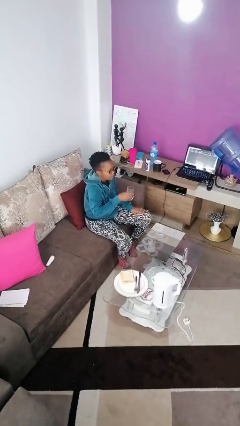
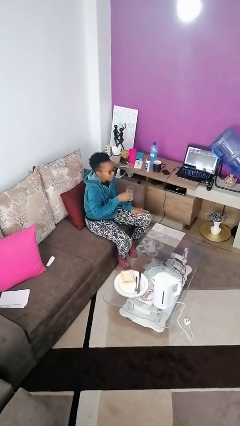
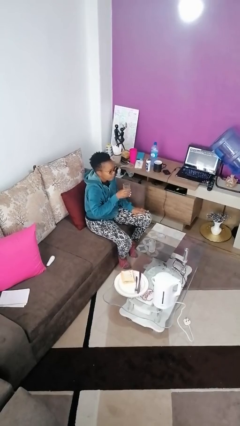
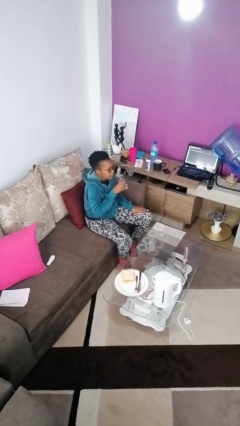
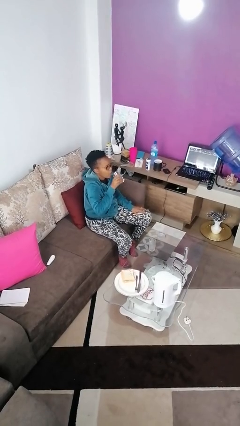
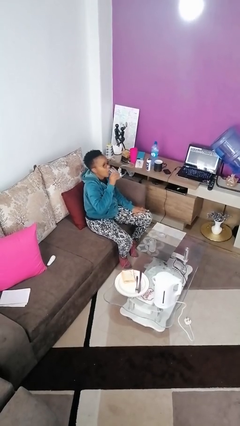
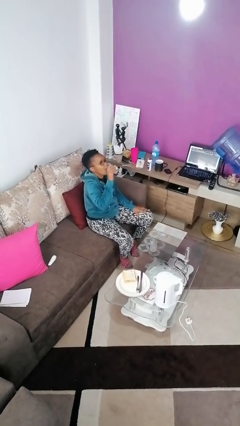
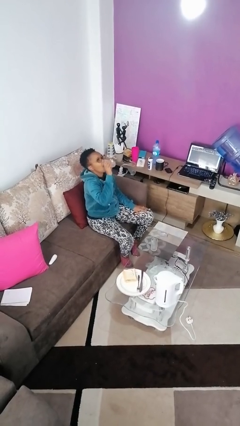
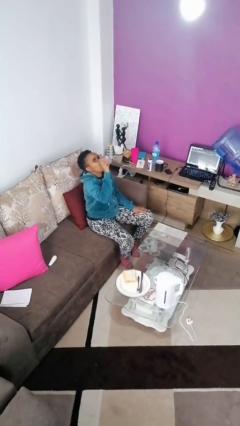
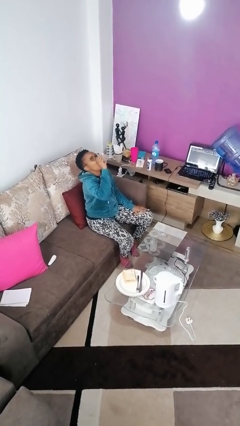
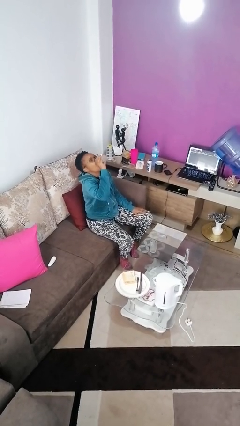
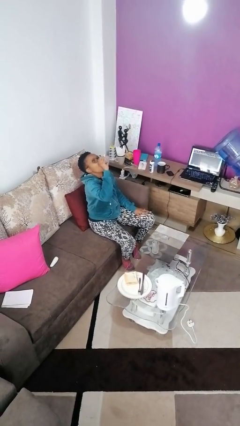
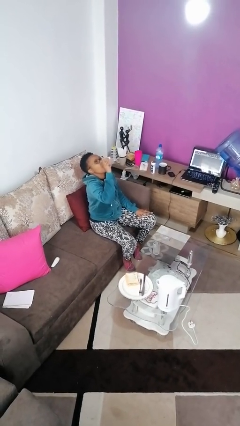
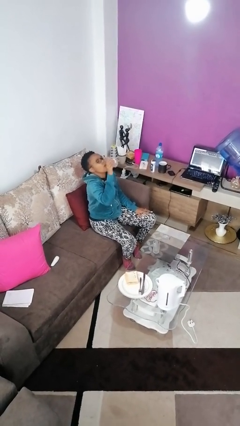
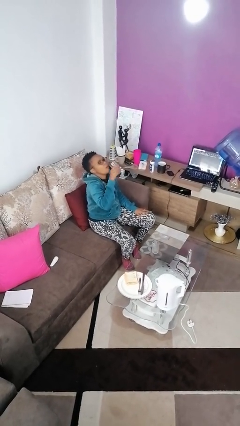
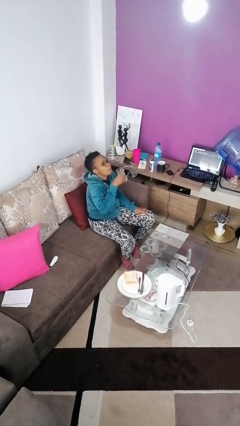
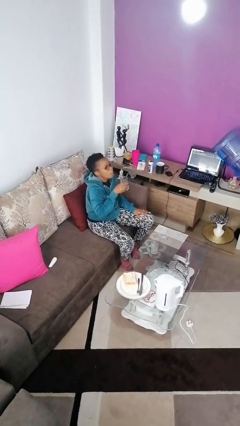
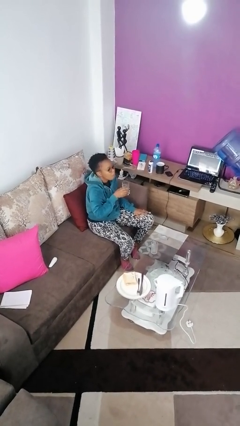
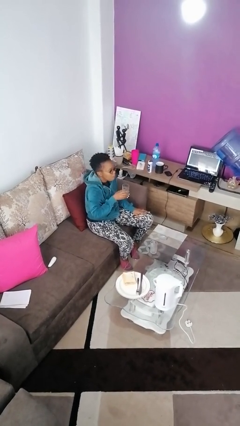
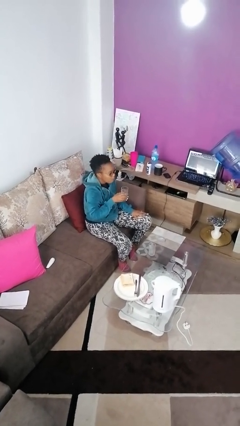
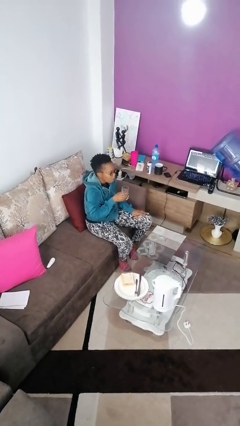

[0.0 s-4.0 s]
person drinks from shotglass

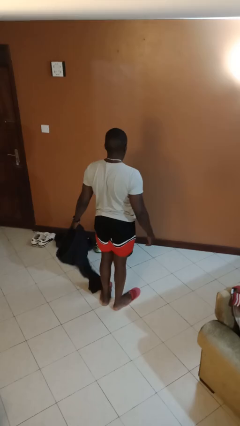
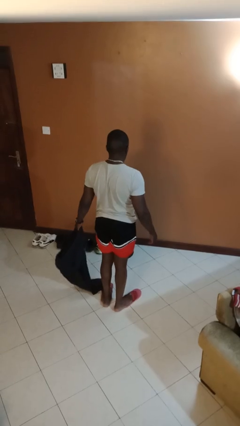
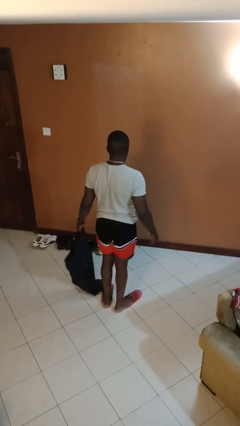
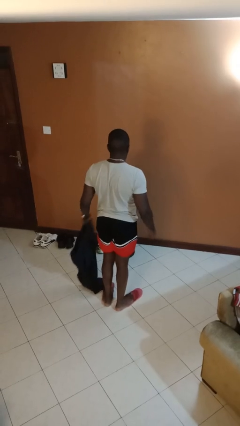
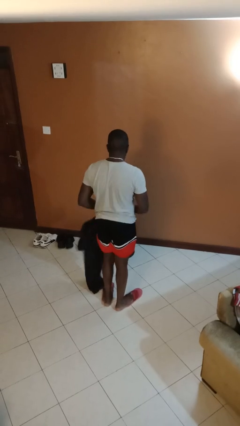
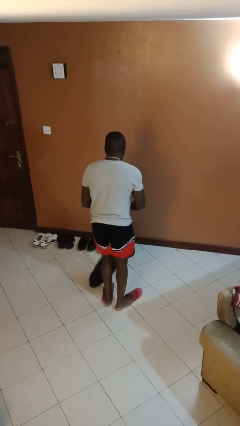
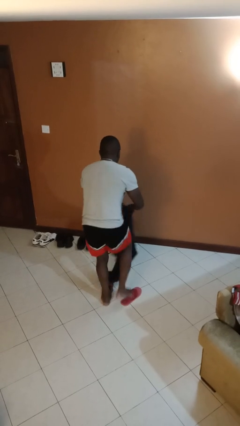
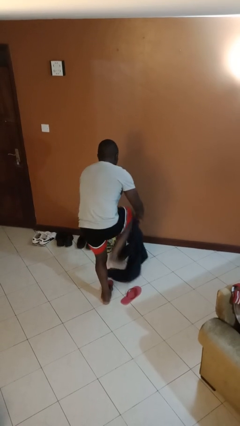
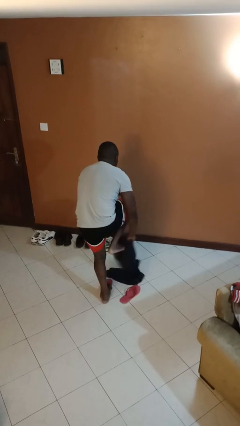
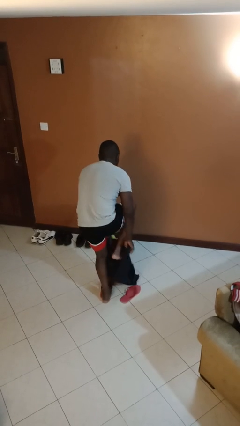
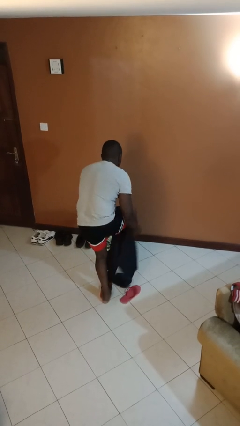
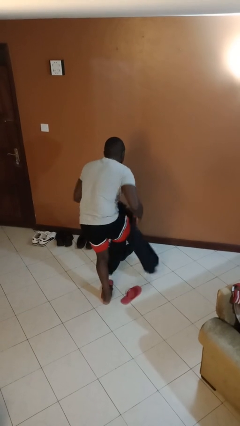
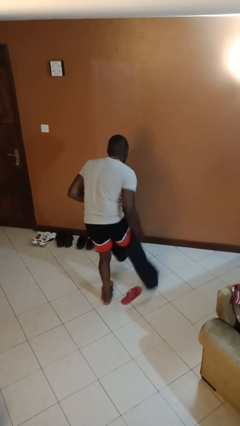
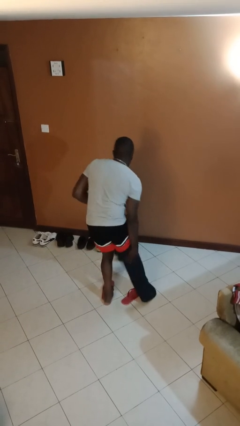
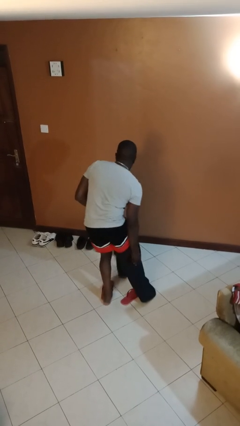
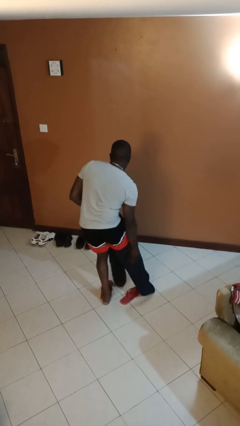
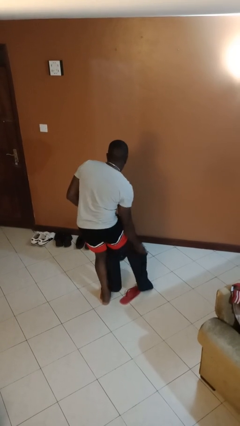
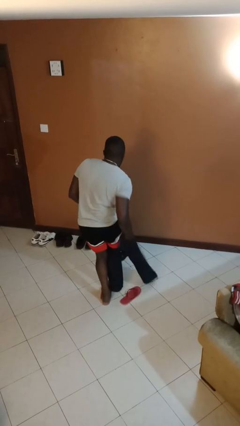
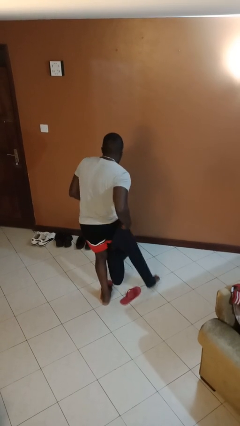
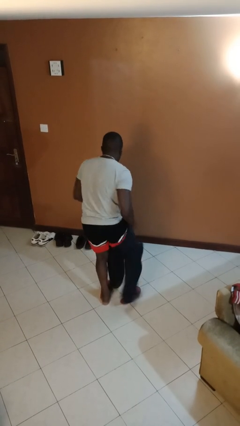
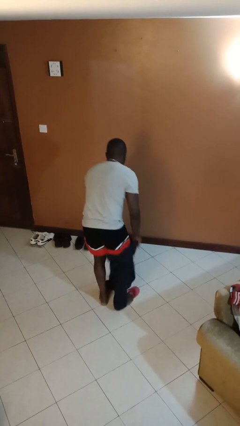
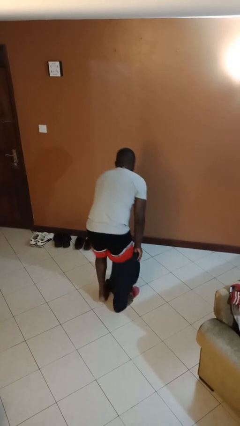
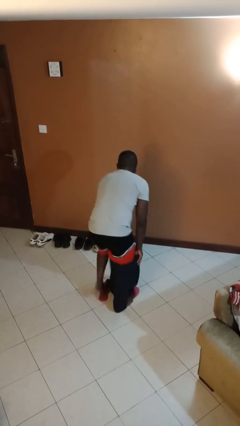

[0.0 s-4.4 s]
person puts on pants

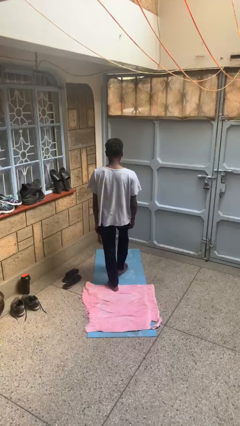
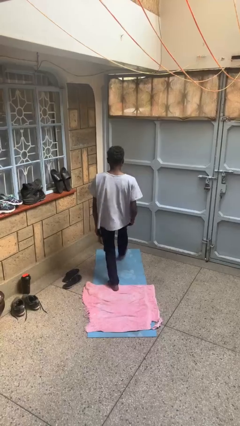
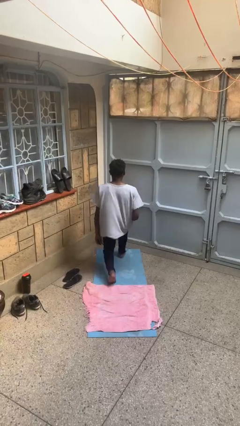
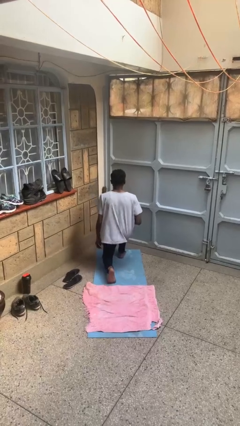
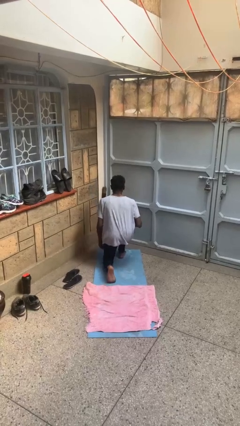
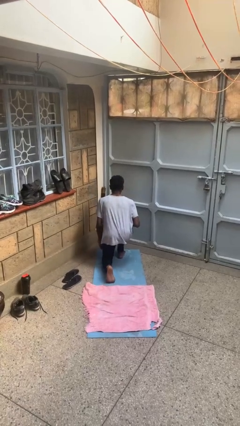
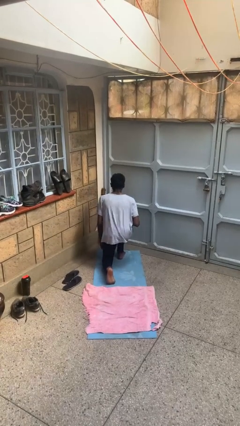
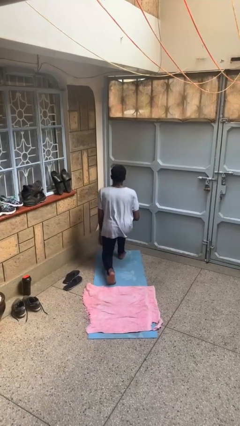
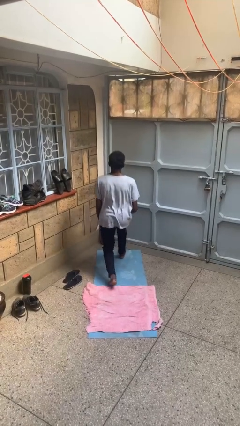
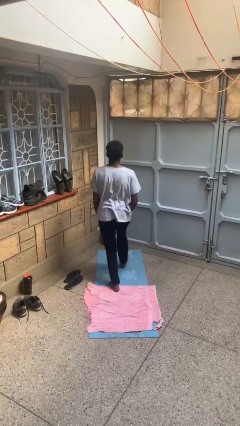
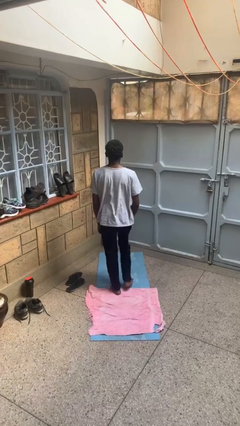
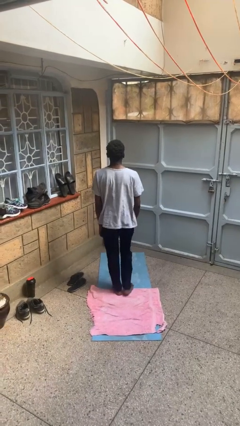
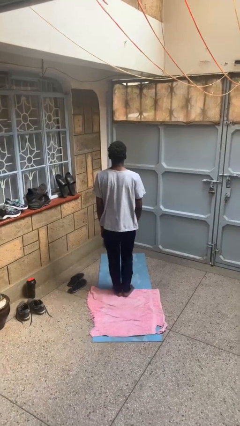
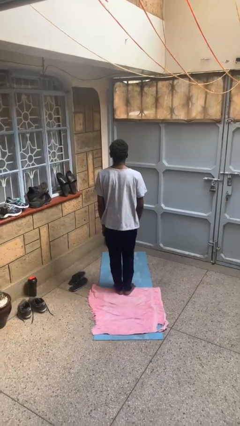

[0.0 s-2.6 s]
person exercises with lunges

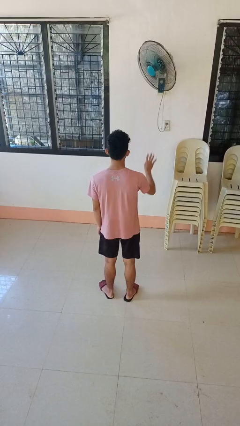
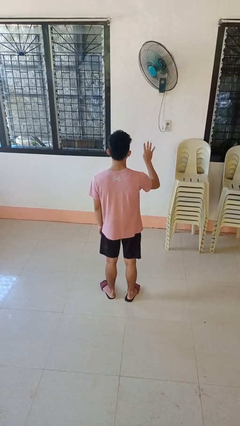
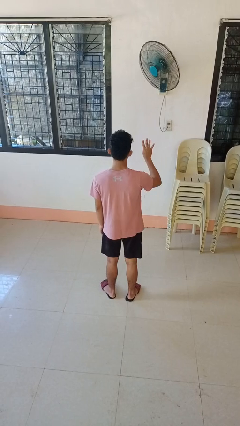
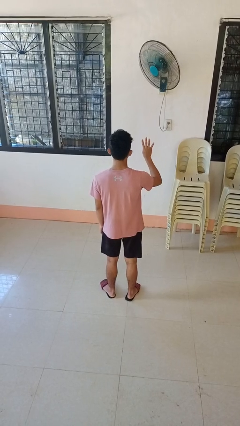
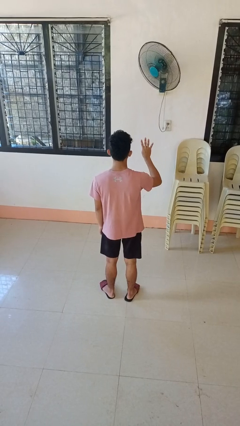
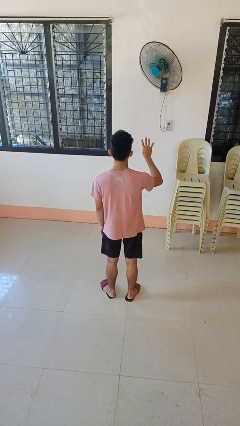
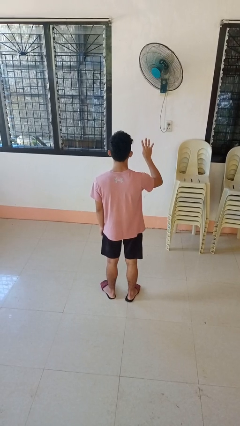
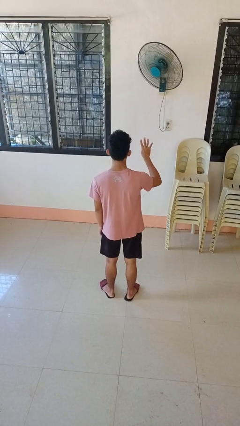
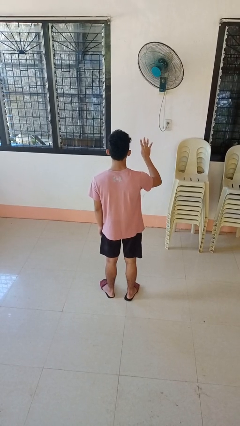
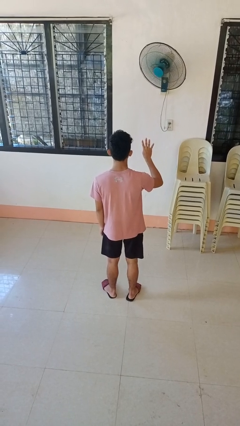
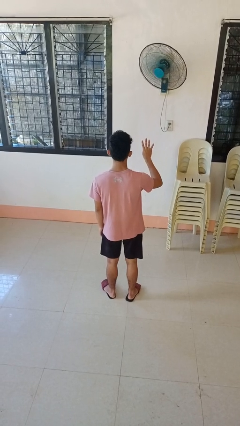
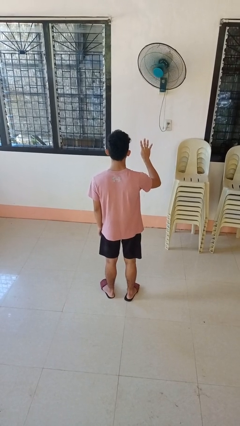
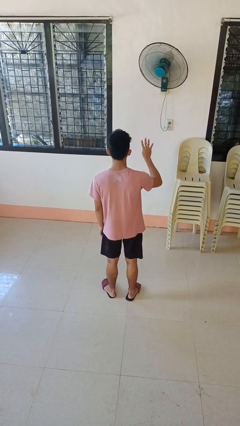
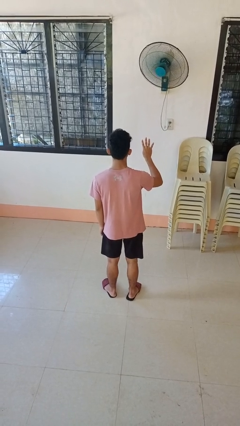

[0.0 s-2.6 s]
person gestures number four

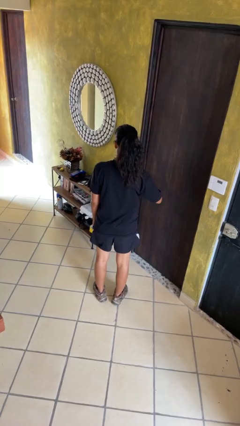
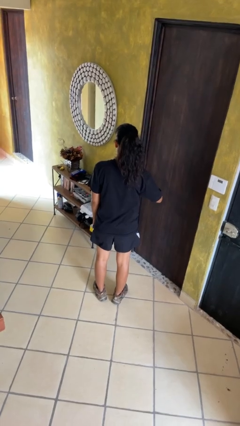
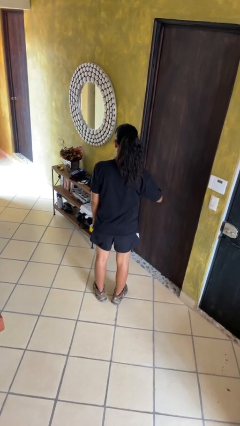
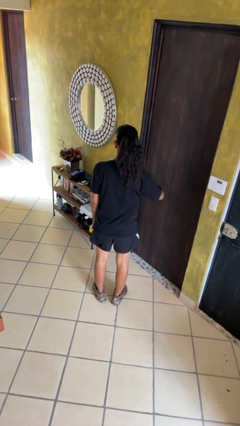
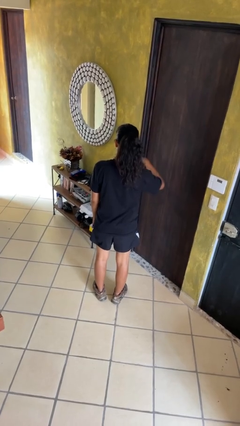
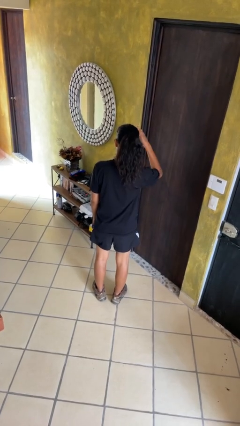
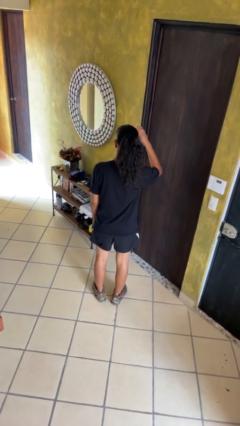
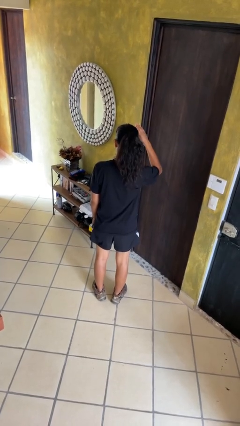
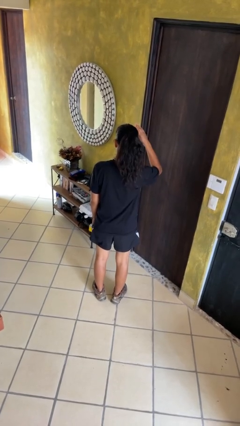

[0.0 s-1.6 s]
person gestures swipe up

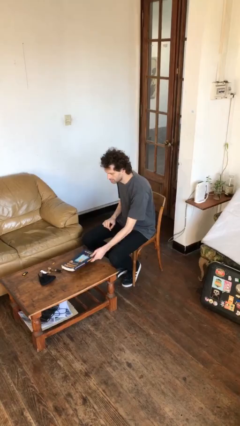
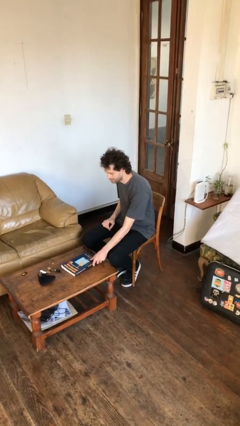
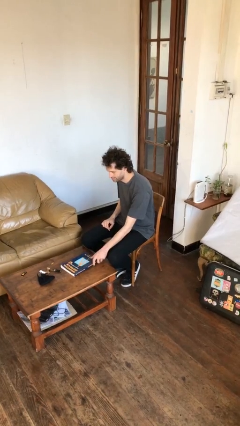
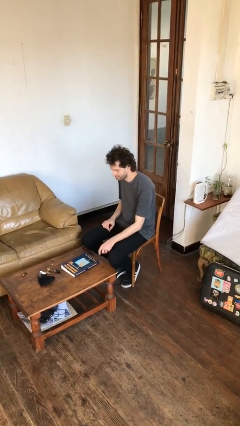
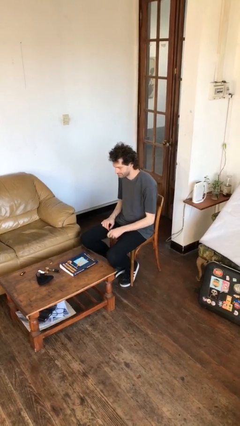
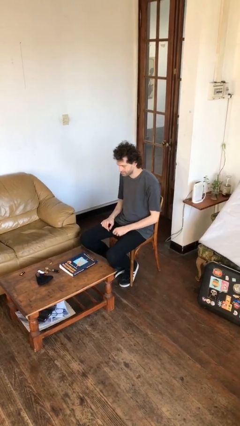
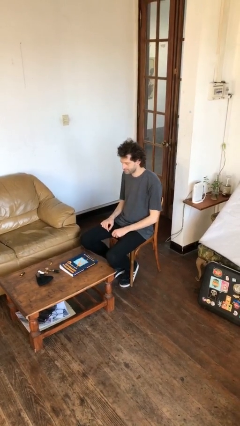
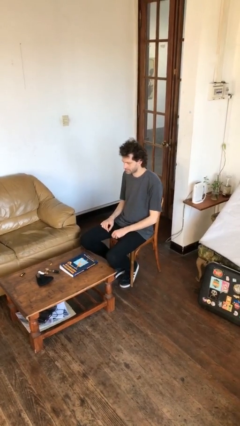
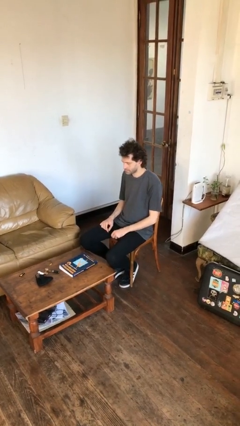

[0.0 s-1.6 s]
person puts down object on table

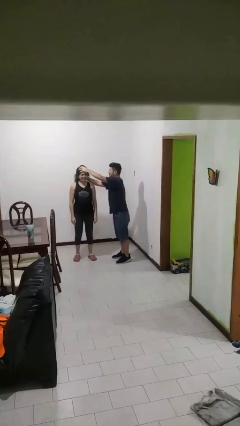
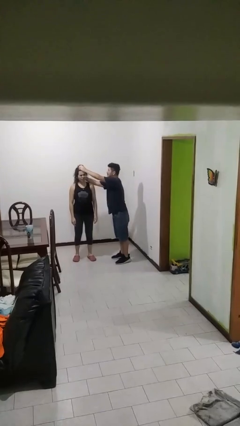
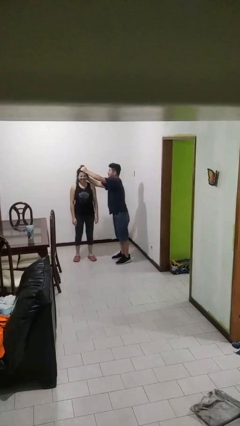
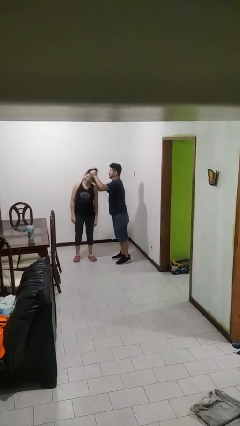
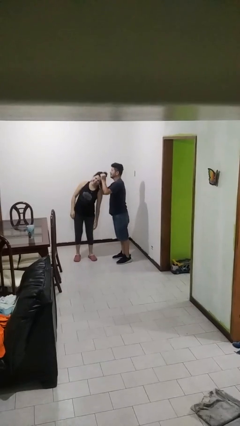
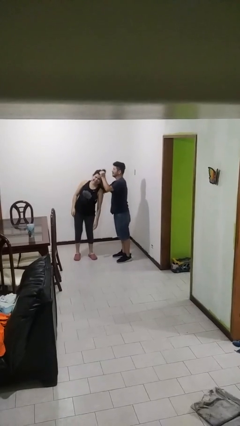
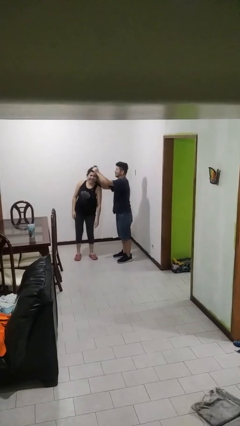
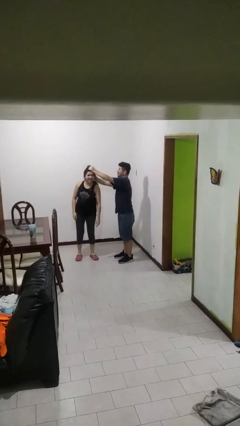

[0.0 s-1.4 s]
person grabs person by hair
